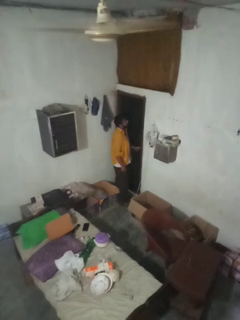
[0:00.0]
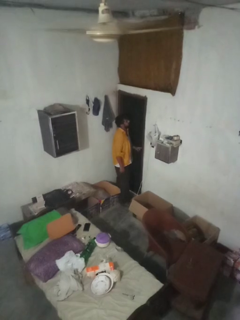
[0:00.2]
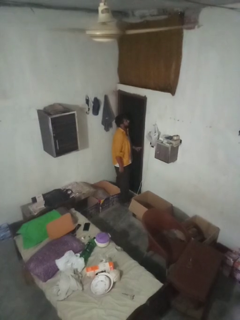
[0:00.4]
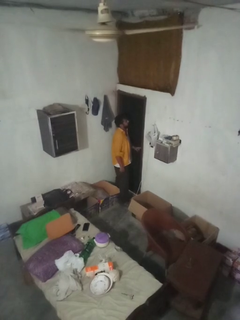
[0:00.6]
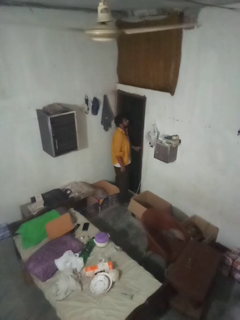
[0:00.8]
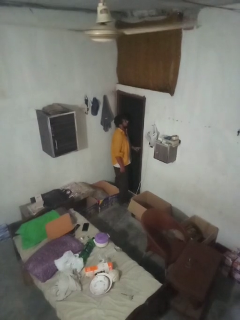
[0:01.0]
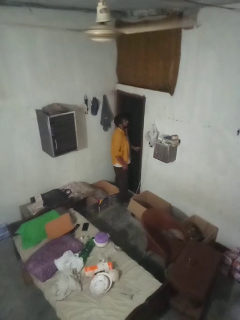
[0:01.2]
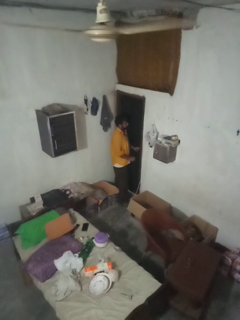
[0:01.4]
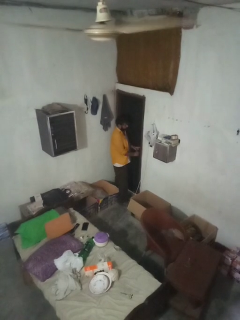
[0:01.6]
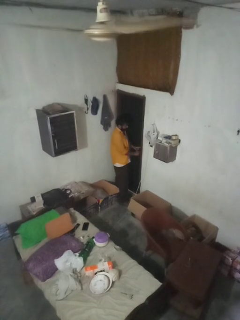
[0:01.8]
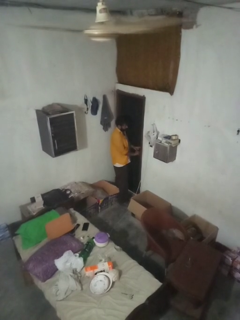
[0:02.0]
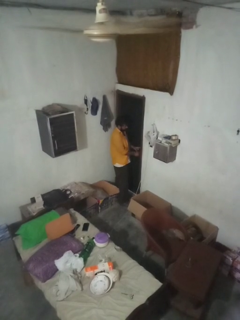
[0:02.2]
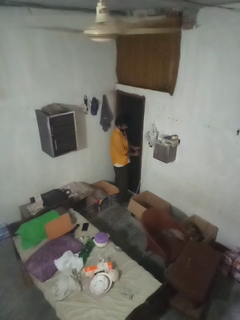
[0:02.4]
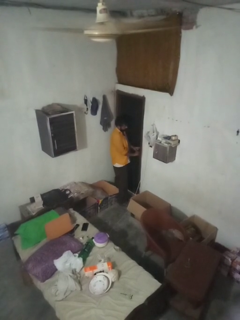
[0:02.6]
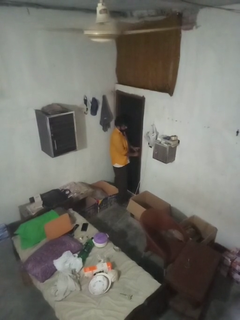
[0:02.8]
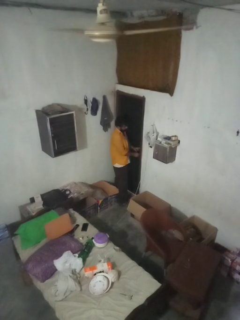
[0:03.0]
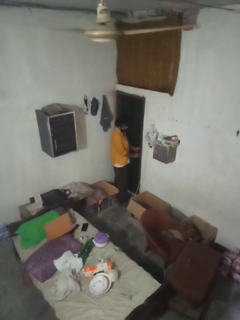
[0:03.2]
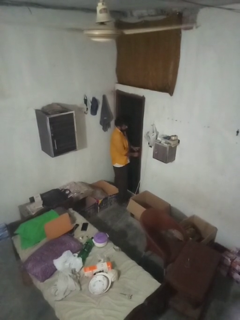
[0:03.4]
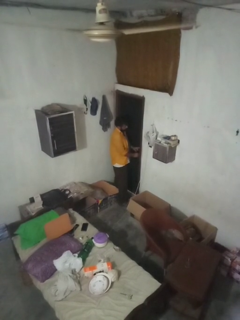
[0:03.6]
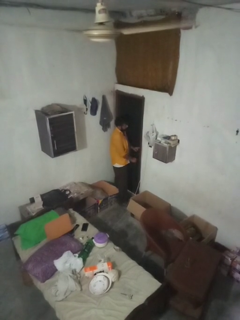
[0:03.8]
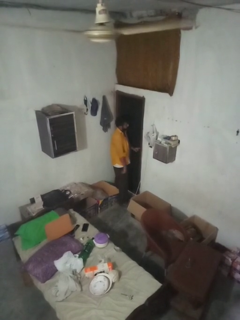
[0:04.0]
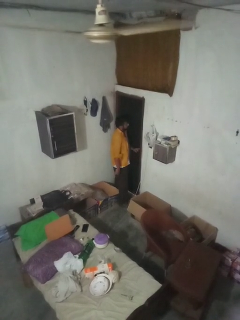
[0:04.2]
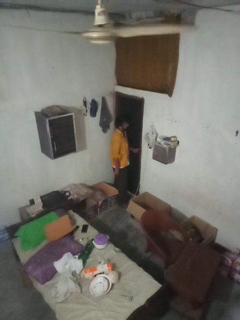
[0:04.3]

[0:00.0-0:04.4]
person unlocks door with keys

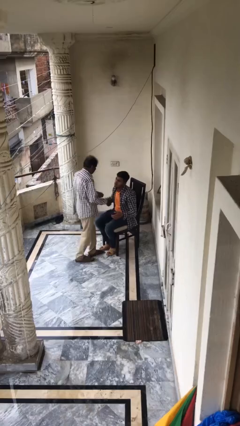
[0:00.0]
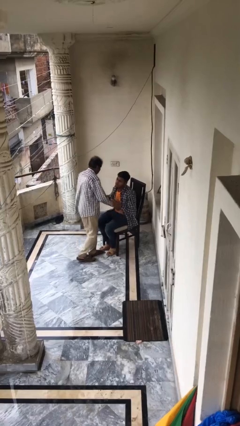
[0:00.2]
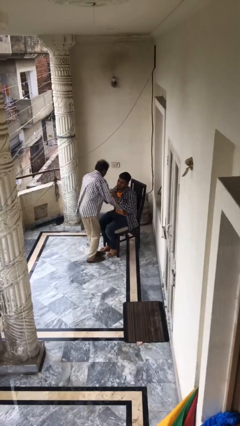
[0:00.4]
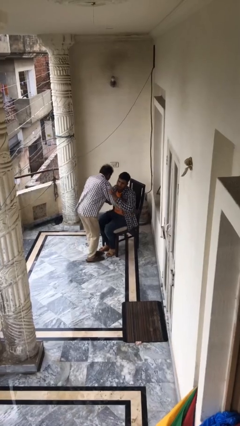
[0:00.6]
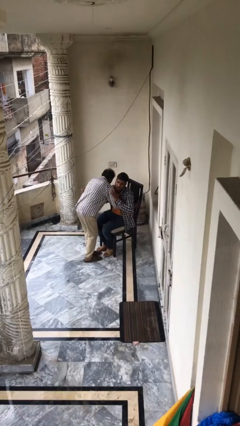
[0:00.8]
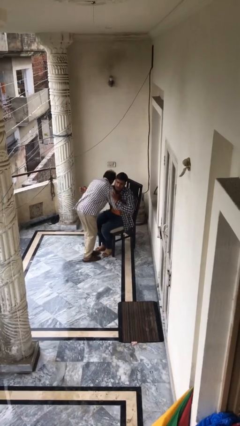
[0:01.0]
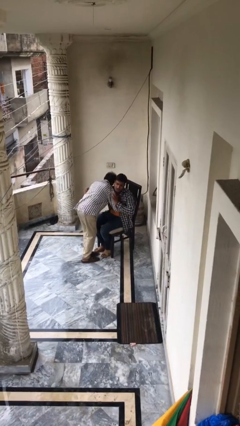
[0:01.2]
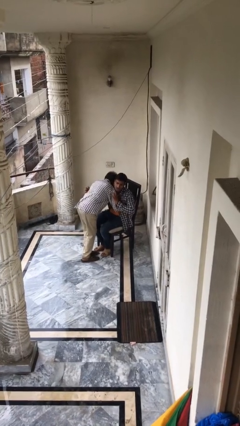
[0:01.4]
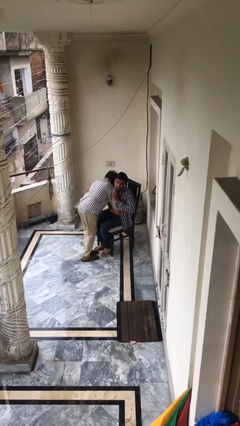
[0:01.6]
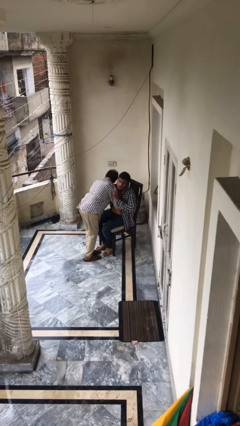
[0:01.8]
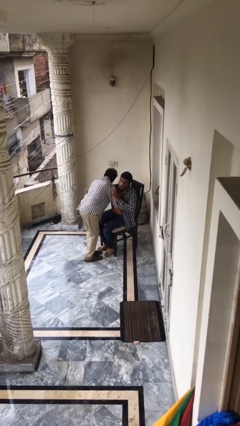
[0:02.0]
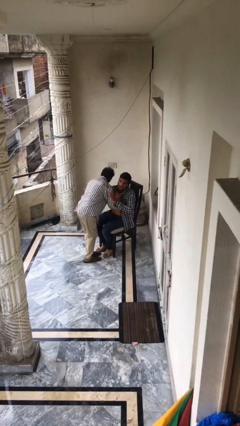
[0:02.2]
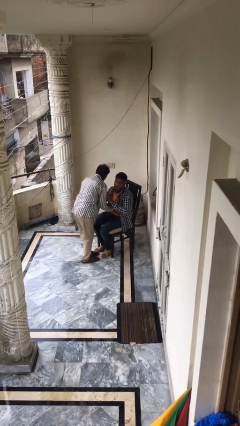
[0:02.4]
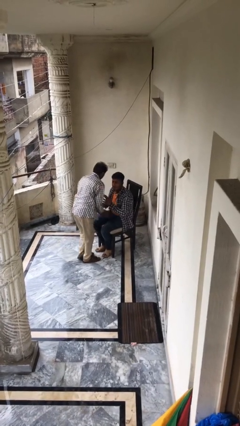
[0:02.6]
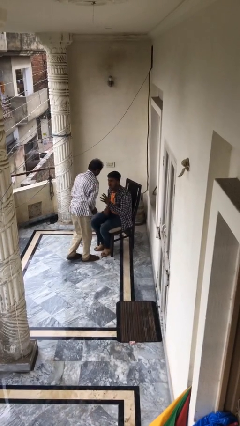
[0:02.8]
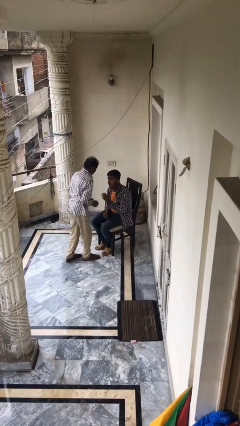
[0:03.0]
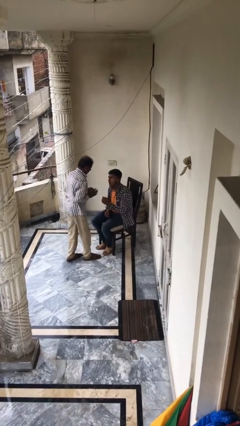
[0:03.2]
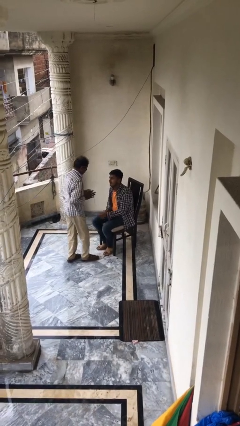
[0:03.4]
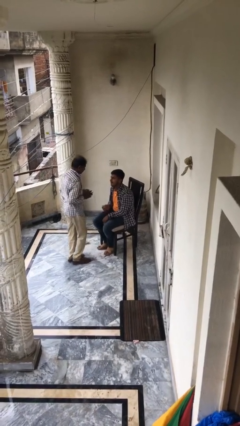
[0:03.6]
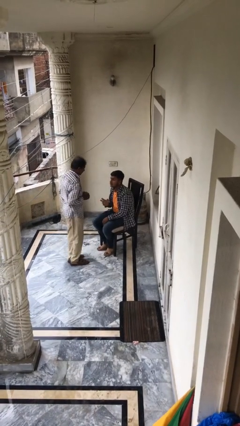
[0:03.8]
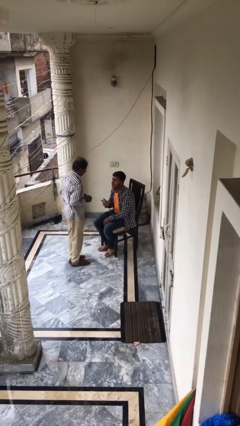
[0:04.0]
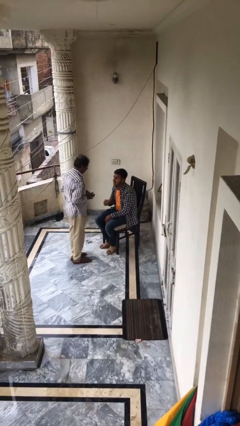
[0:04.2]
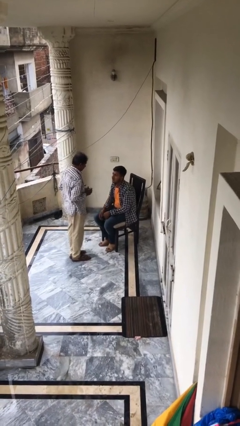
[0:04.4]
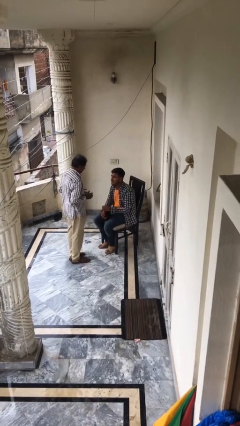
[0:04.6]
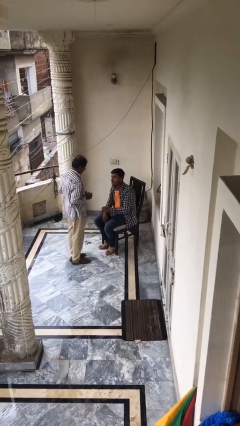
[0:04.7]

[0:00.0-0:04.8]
person embraces person

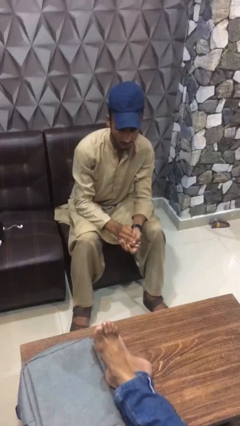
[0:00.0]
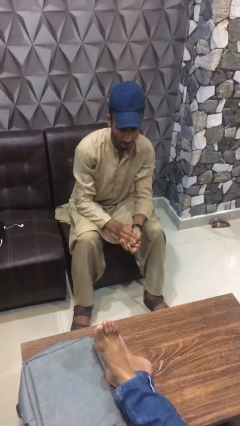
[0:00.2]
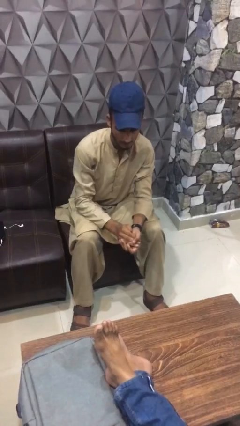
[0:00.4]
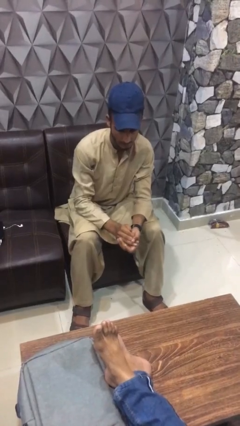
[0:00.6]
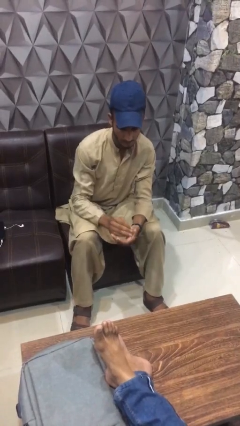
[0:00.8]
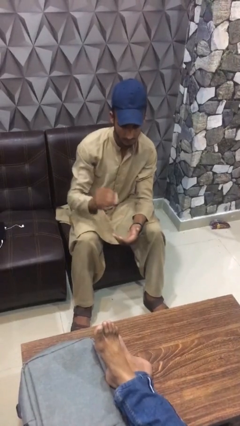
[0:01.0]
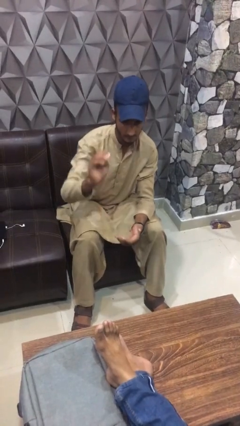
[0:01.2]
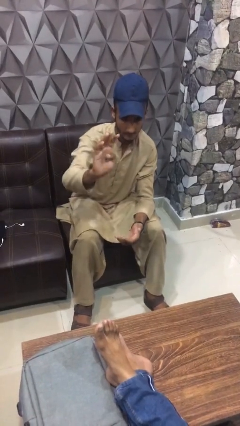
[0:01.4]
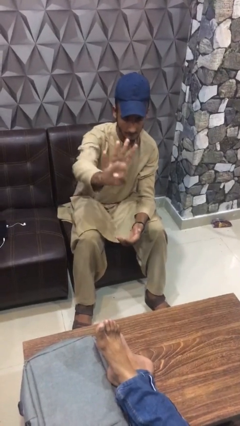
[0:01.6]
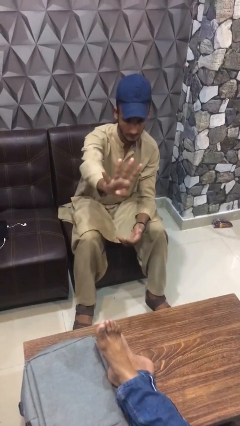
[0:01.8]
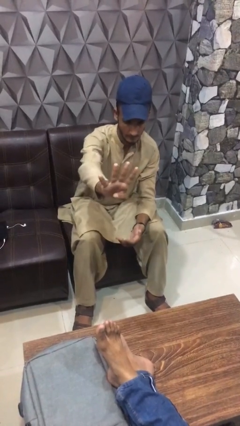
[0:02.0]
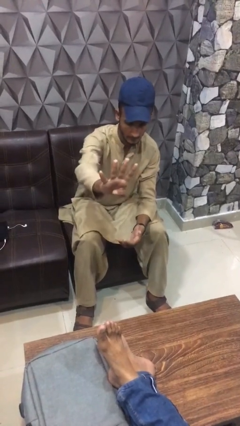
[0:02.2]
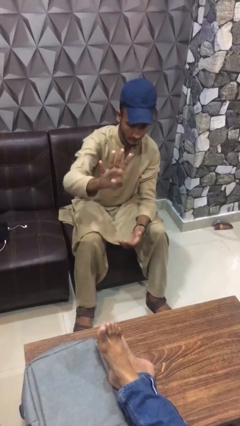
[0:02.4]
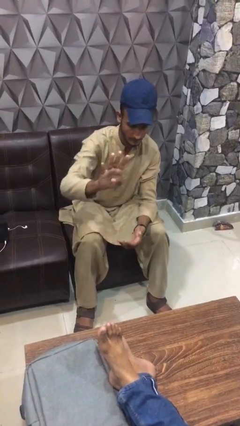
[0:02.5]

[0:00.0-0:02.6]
person gestures number four

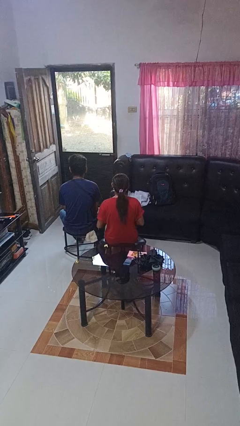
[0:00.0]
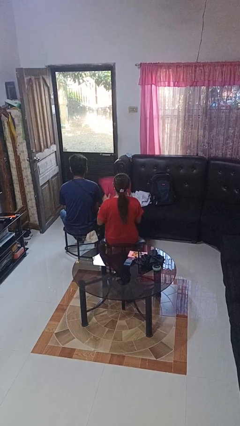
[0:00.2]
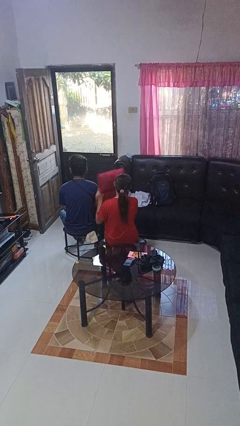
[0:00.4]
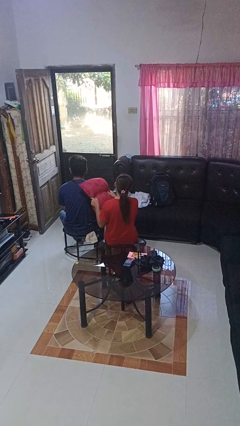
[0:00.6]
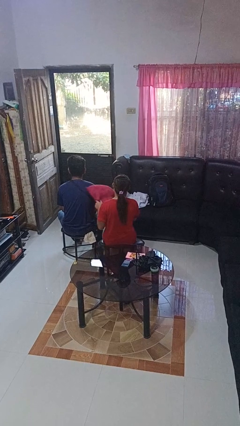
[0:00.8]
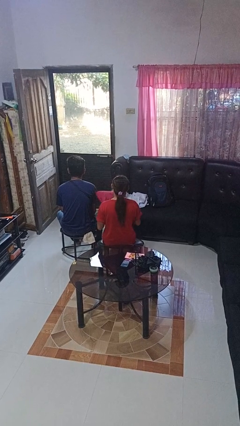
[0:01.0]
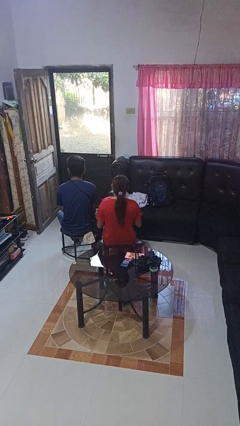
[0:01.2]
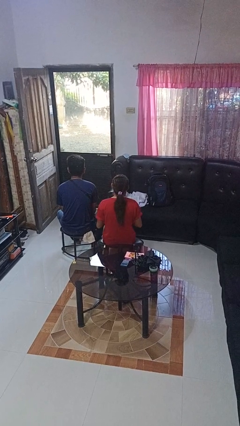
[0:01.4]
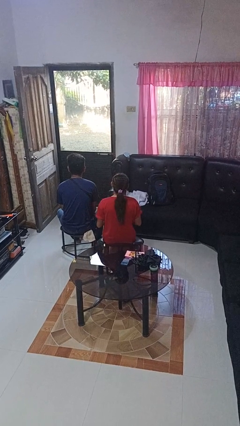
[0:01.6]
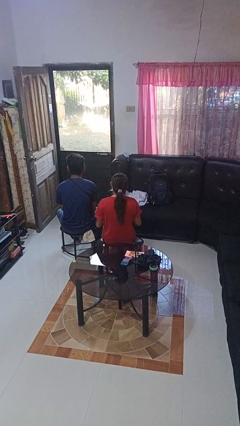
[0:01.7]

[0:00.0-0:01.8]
person hits person with pillow

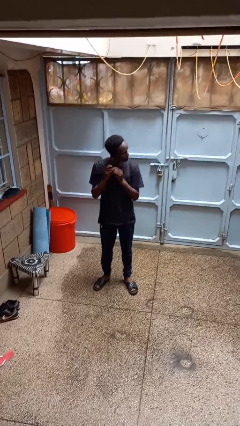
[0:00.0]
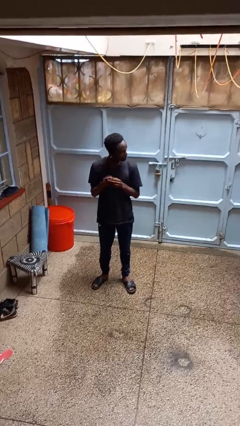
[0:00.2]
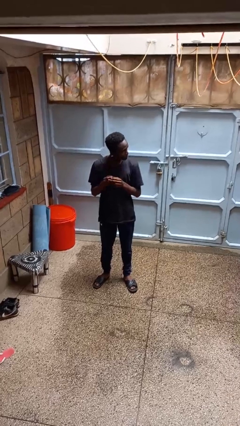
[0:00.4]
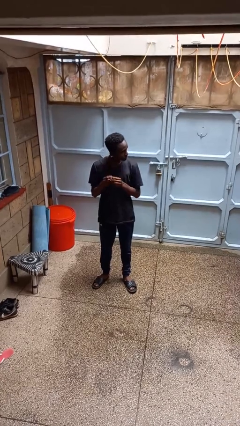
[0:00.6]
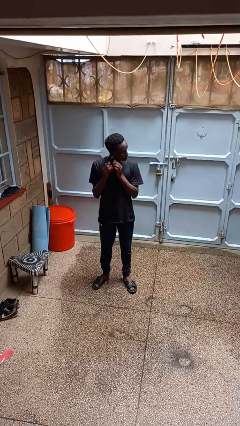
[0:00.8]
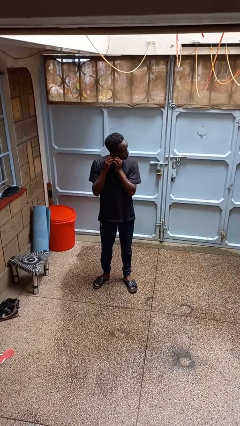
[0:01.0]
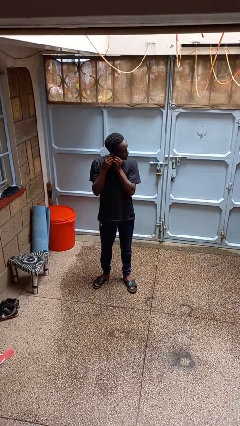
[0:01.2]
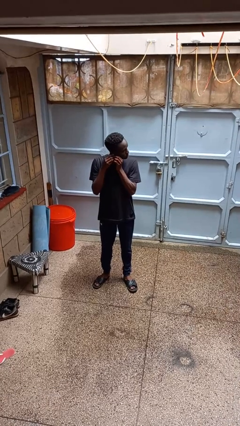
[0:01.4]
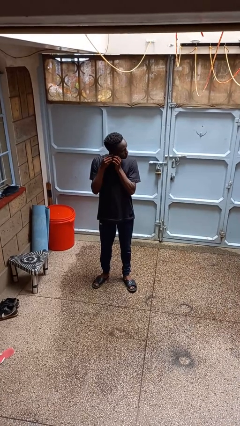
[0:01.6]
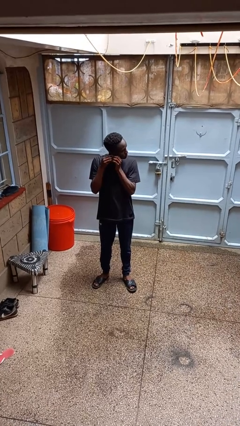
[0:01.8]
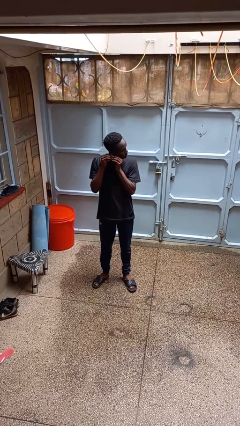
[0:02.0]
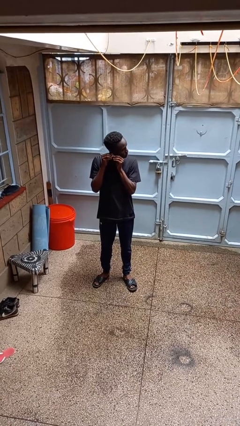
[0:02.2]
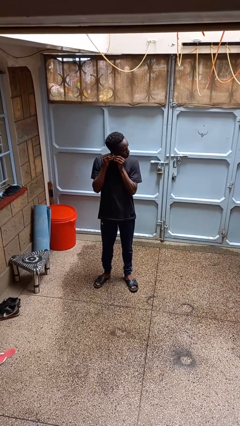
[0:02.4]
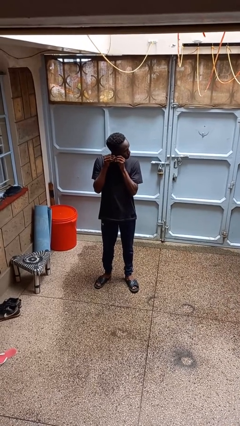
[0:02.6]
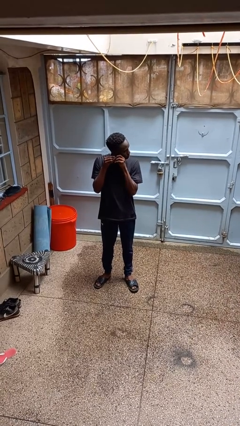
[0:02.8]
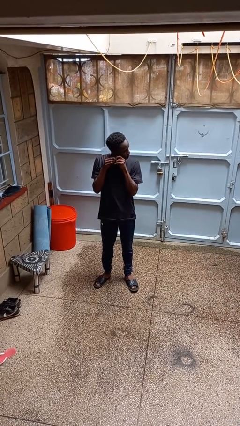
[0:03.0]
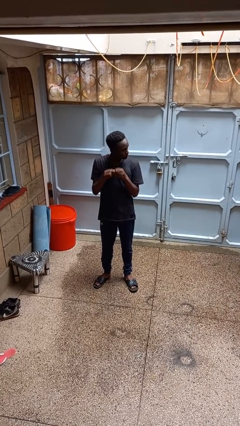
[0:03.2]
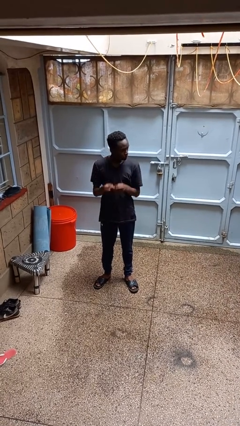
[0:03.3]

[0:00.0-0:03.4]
person takes off earrings

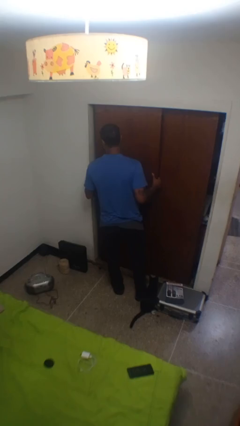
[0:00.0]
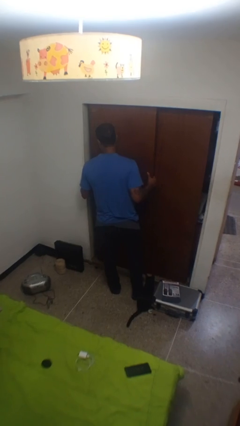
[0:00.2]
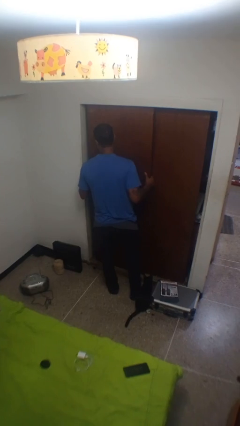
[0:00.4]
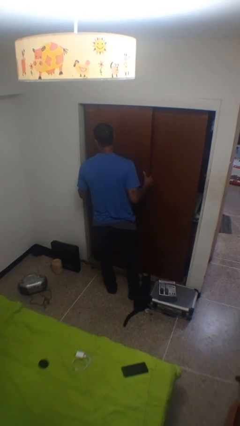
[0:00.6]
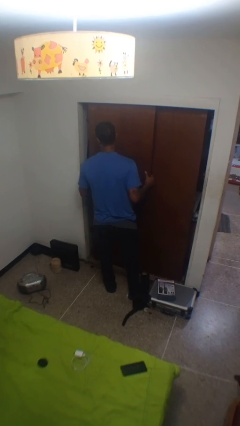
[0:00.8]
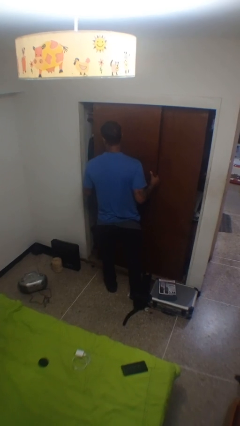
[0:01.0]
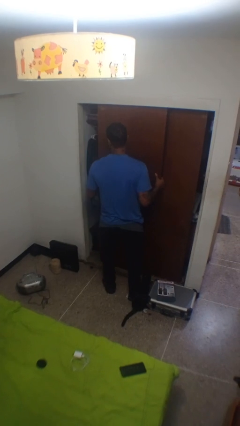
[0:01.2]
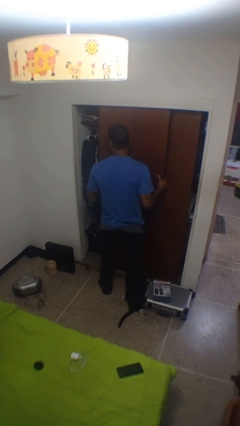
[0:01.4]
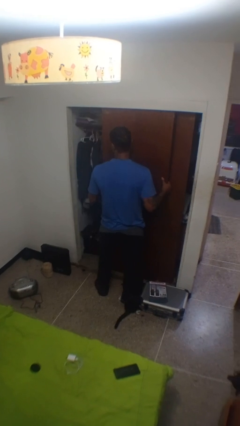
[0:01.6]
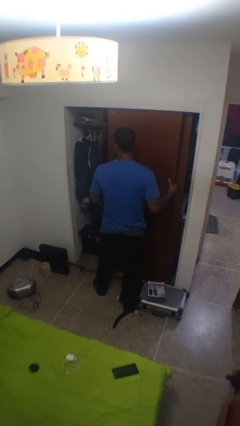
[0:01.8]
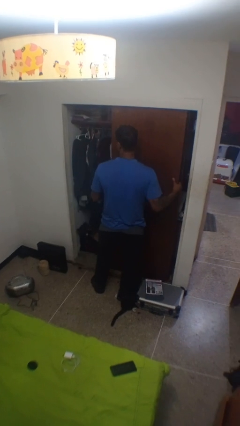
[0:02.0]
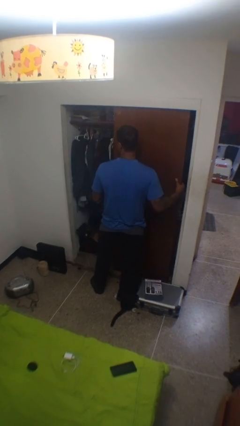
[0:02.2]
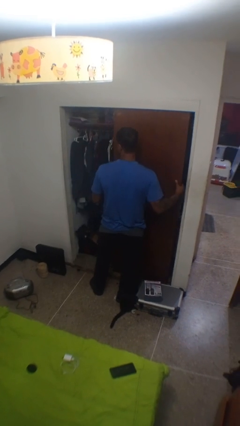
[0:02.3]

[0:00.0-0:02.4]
person opens closet door
